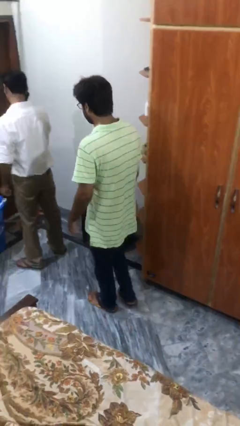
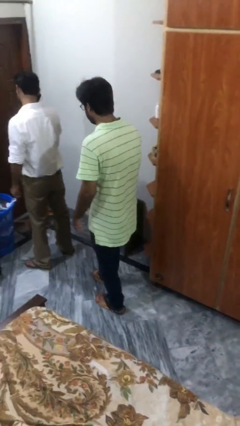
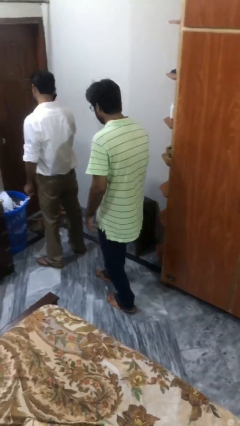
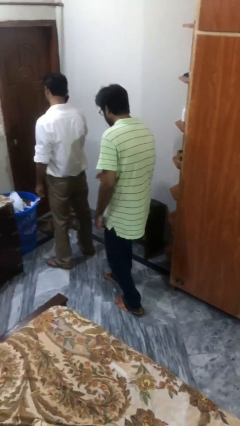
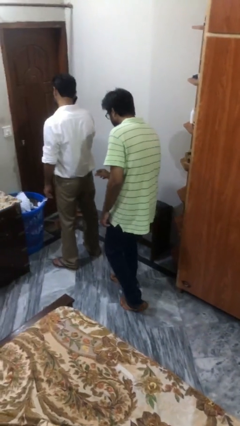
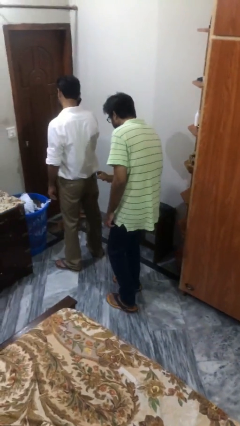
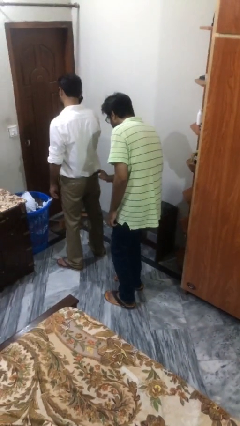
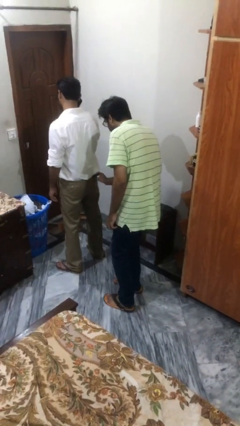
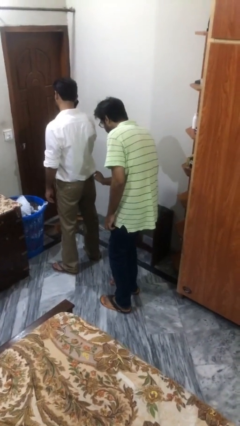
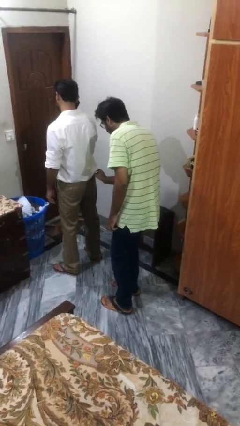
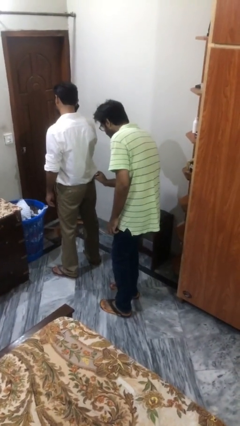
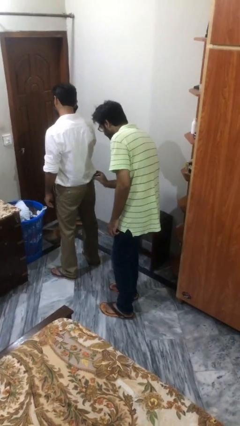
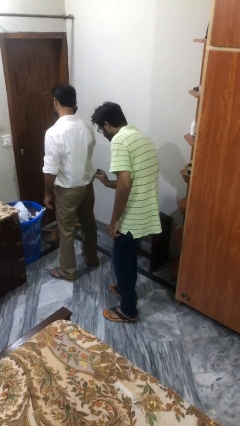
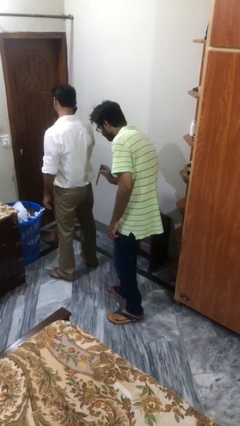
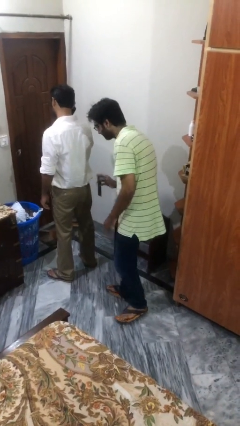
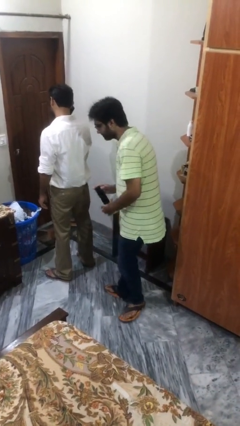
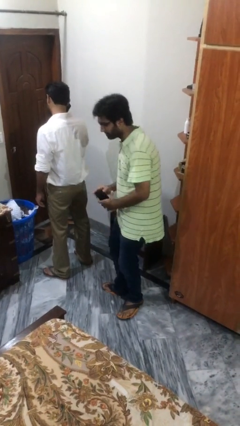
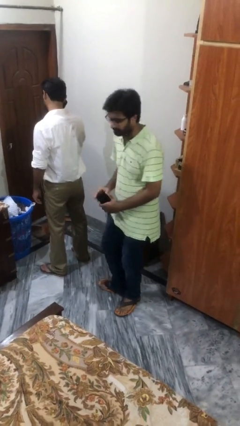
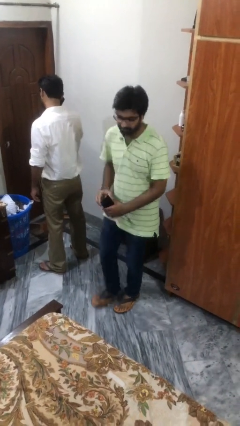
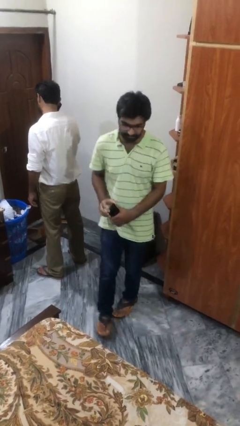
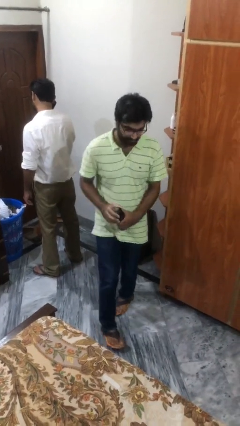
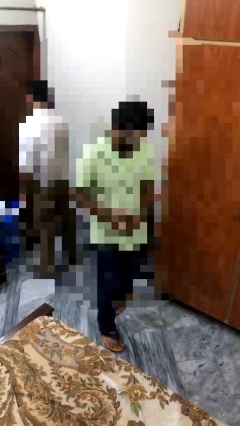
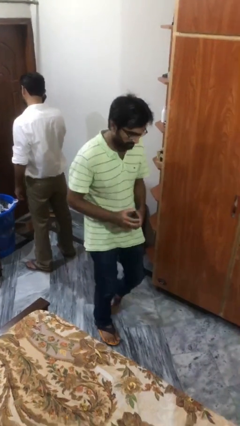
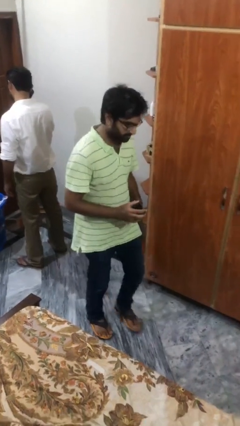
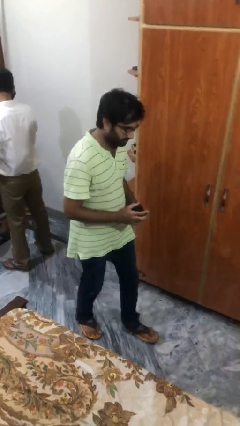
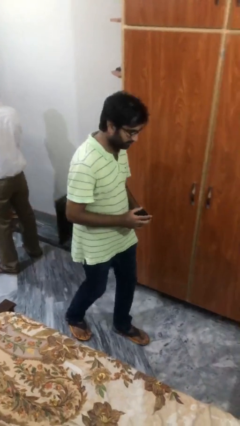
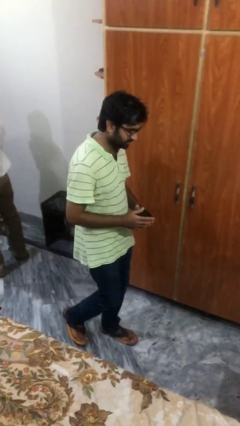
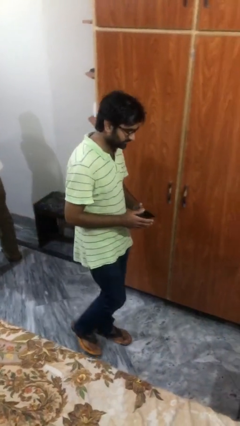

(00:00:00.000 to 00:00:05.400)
person steals object from person

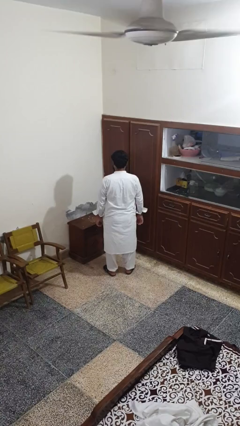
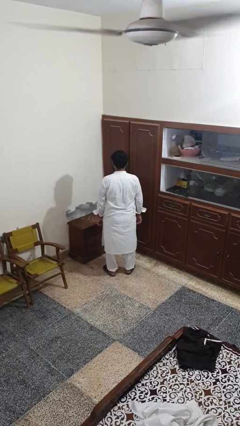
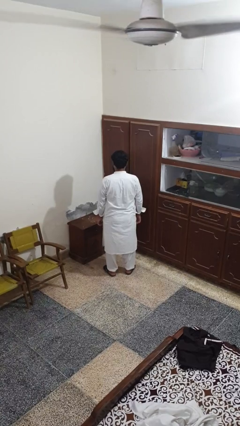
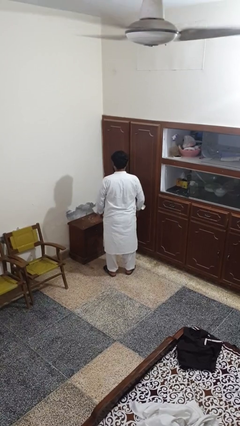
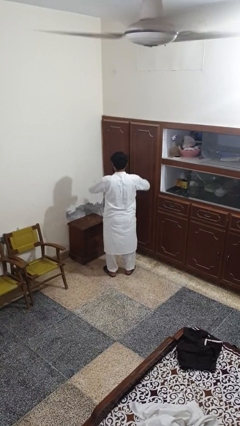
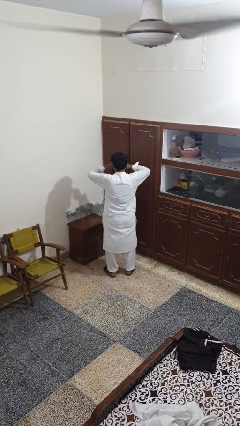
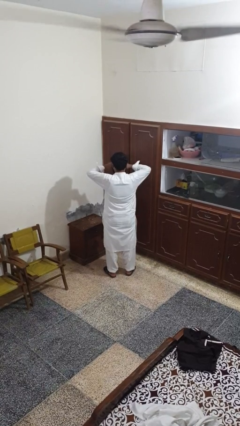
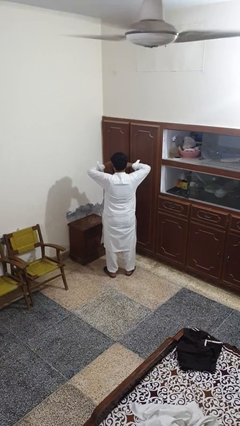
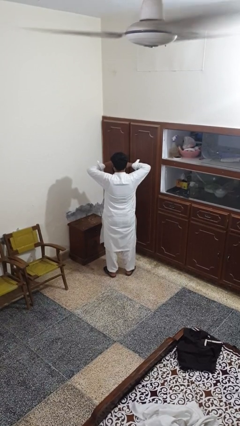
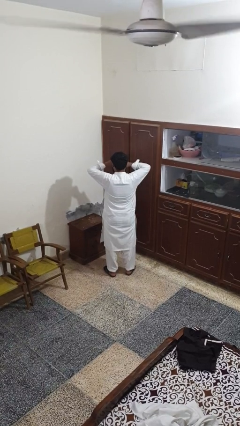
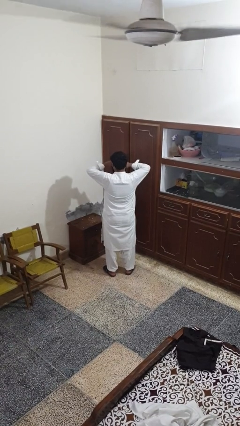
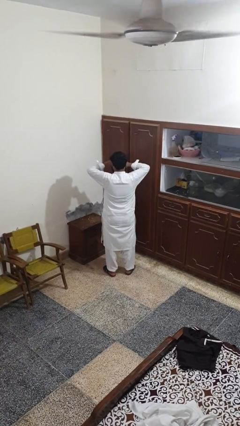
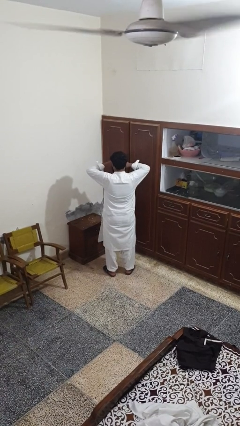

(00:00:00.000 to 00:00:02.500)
person rubs eyes

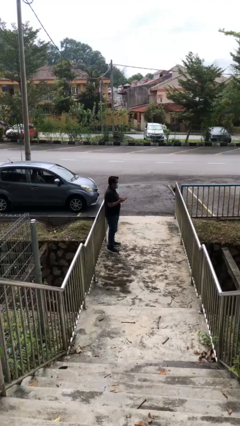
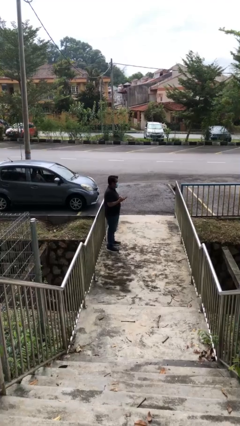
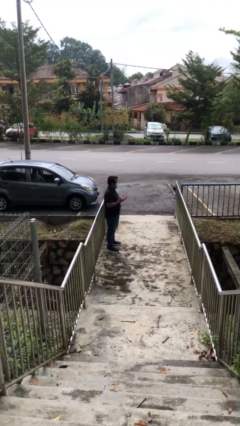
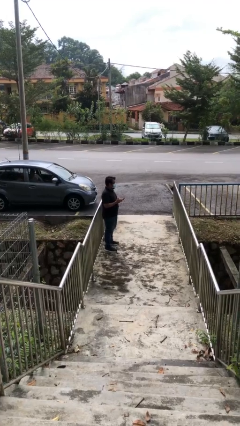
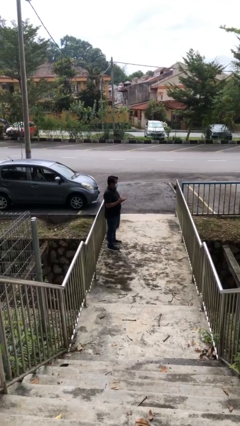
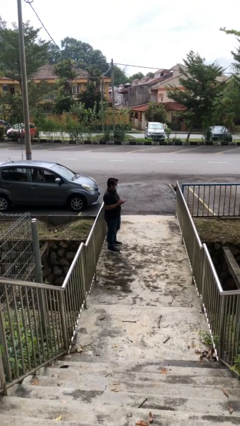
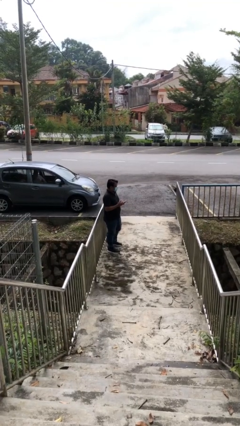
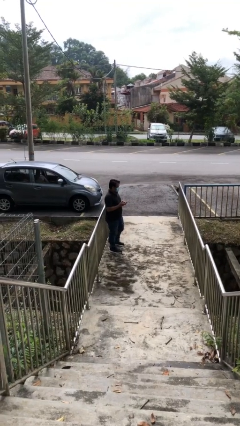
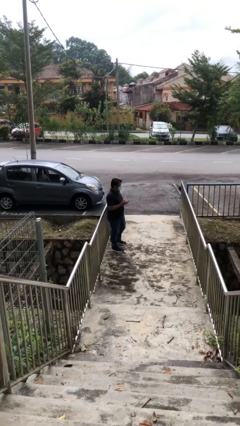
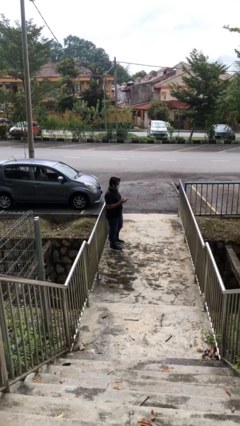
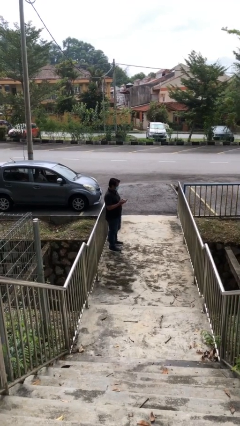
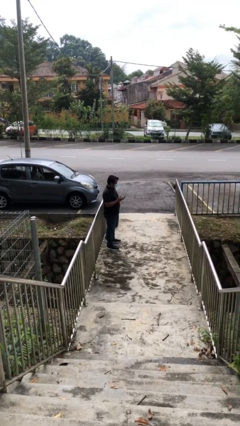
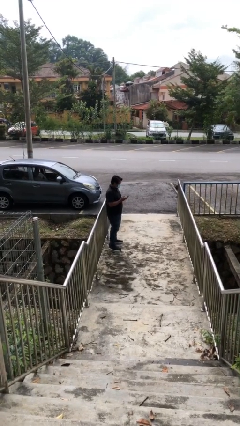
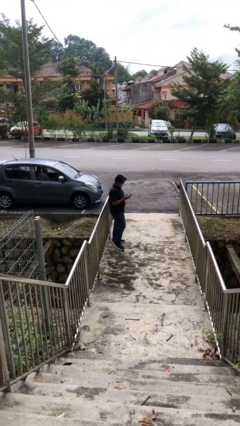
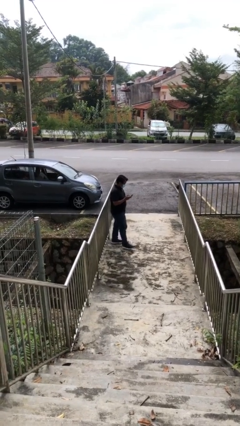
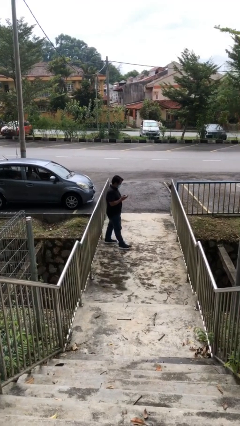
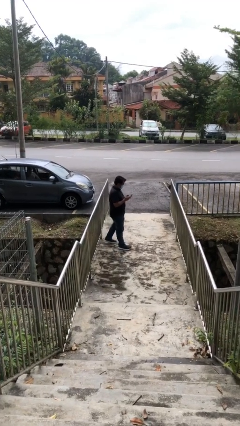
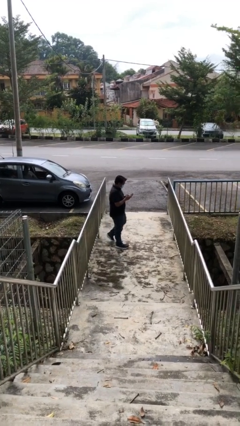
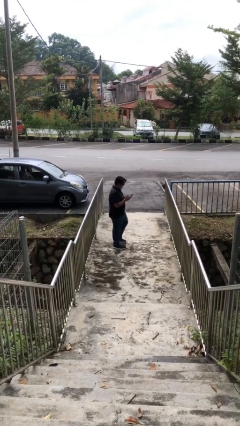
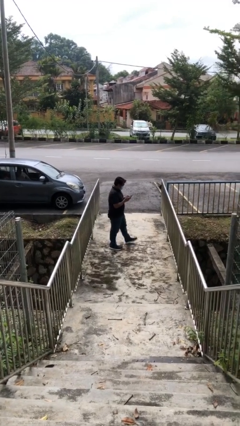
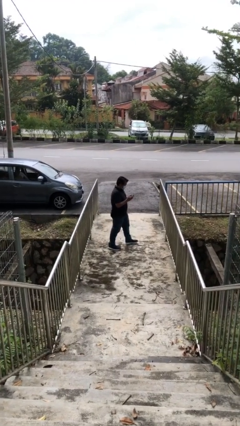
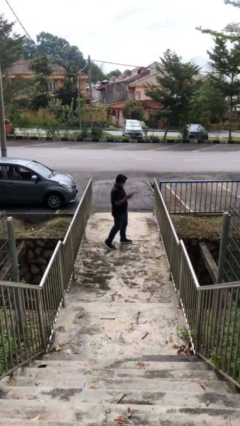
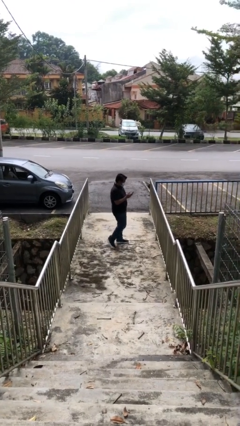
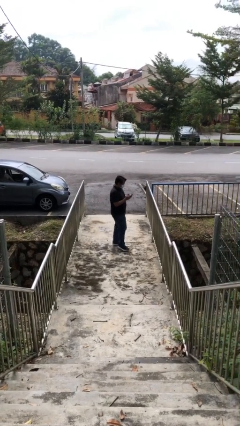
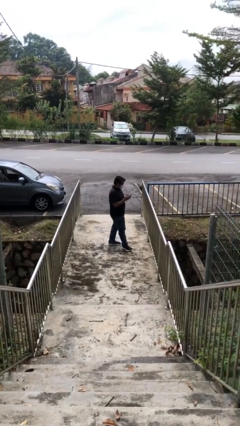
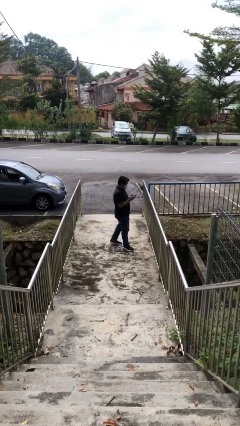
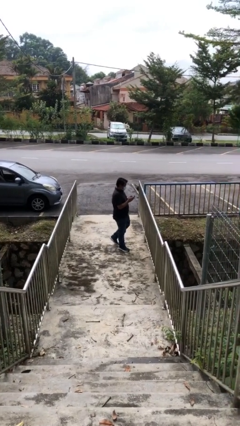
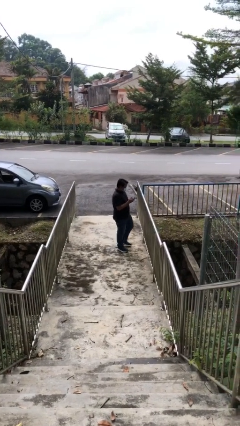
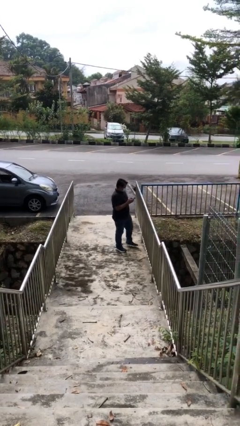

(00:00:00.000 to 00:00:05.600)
person texts on phone

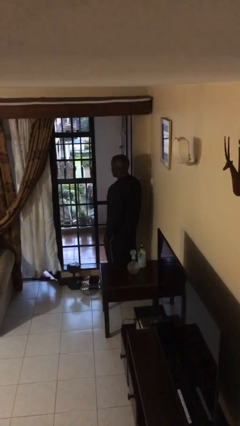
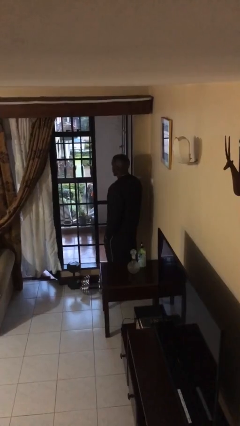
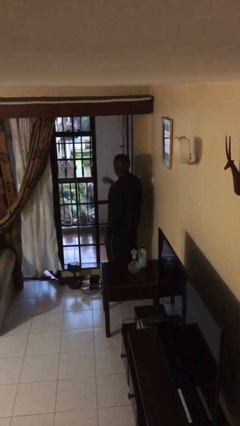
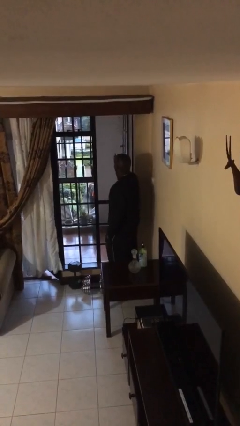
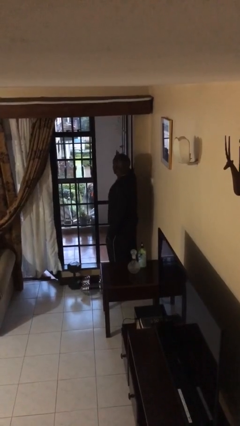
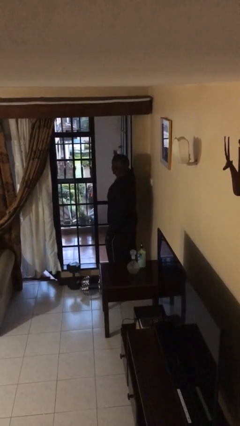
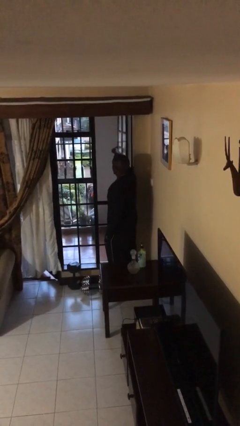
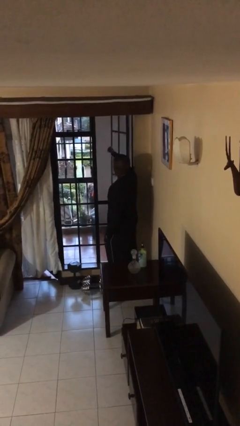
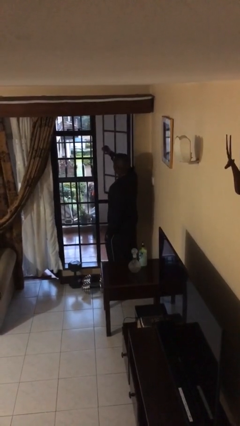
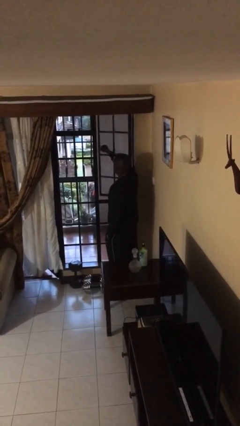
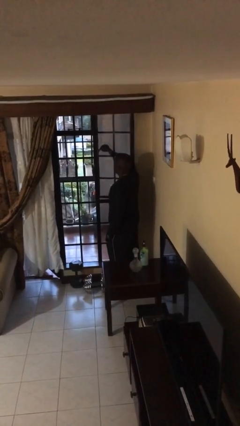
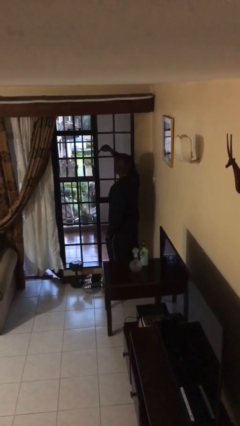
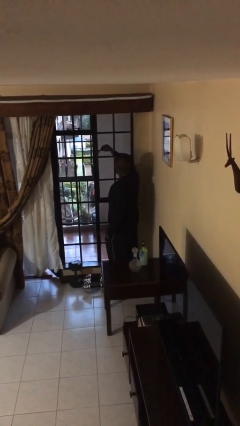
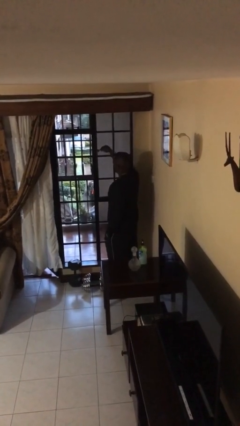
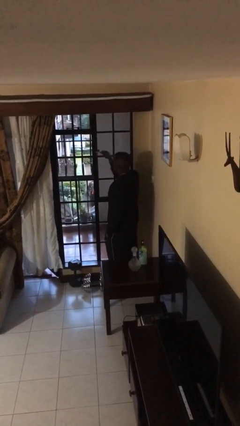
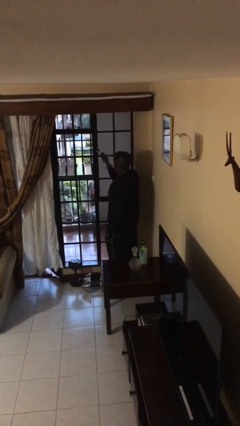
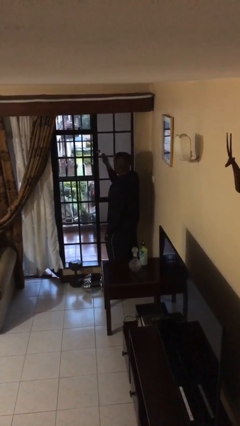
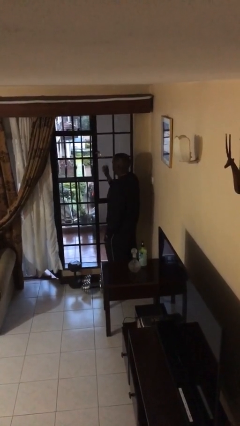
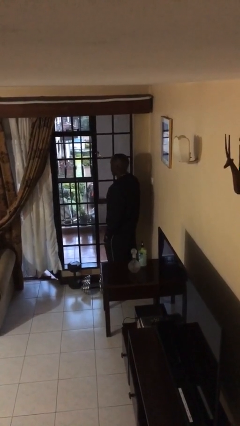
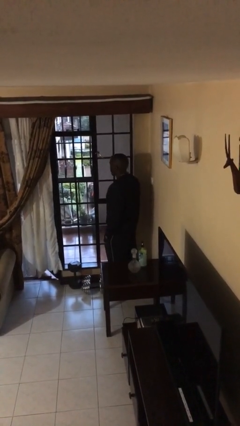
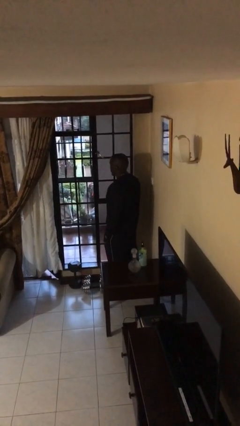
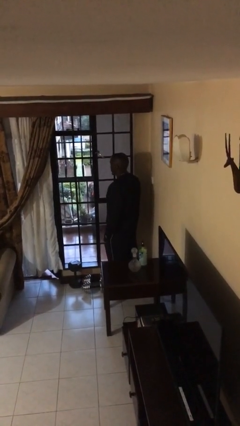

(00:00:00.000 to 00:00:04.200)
person closes home window

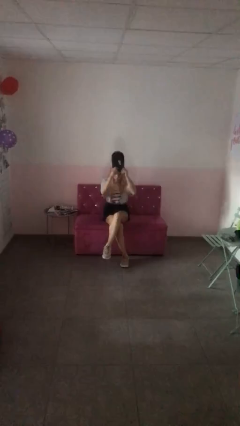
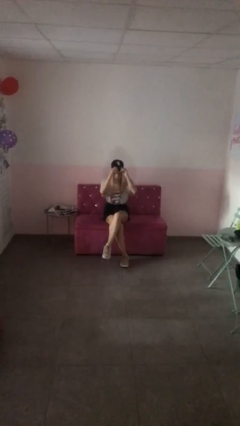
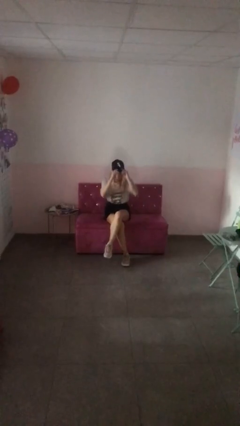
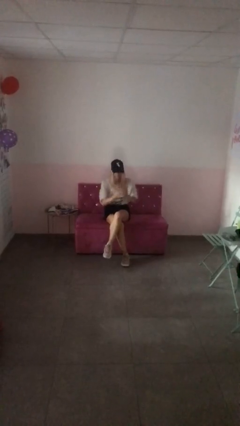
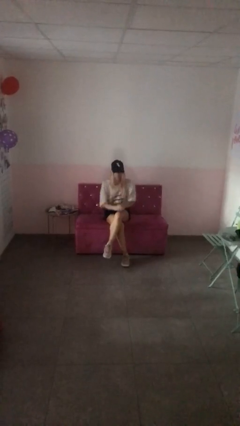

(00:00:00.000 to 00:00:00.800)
person puts on hat
